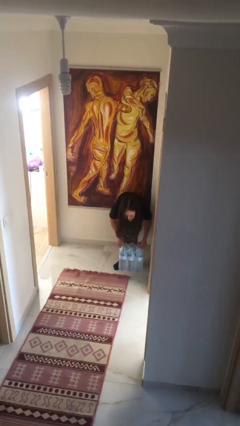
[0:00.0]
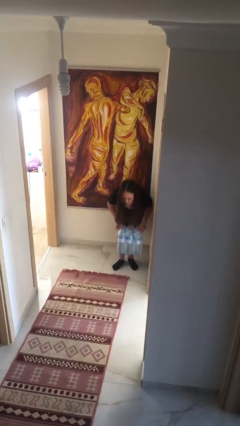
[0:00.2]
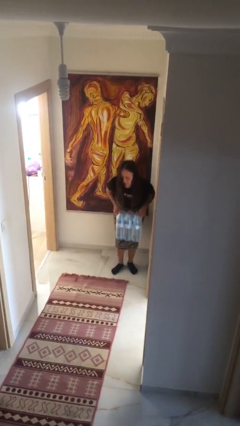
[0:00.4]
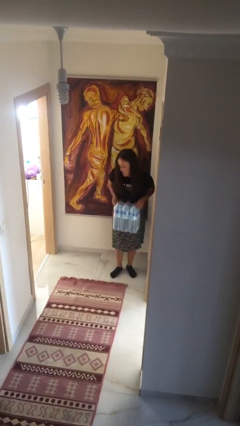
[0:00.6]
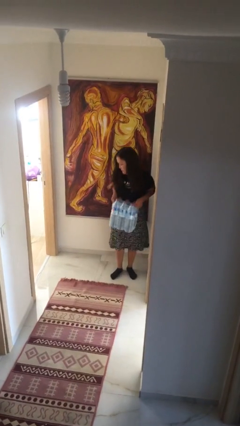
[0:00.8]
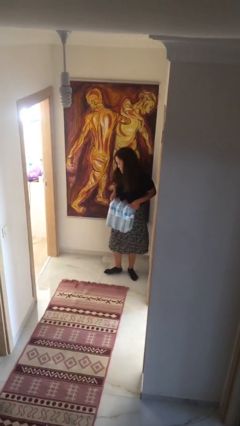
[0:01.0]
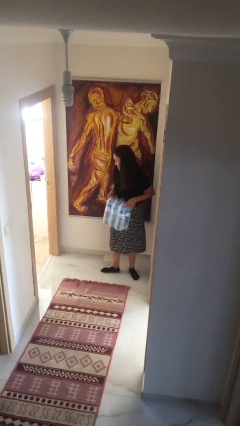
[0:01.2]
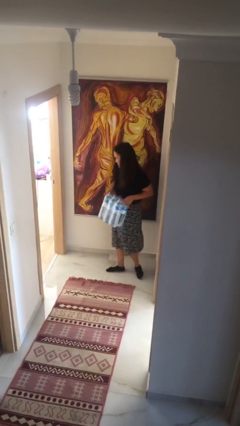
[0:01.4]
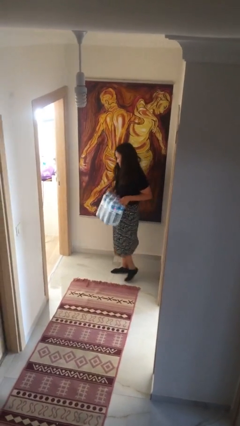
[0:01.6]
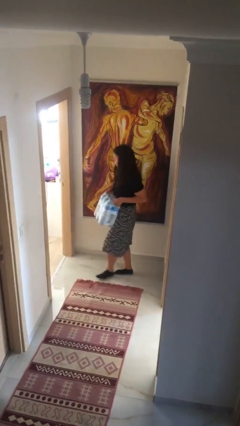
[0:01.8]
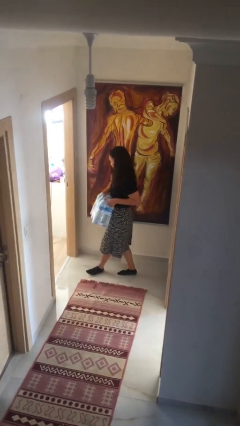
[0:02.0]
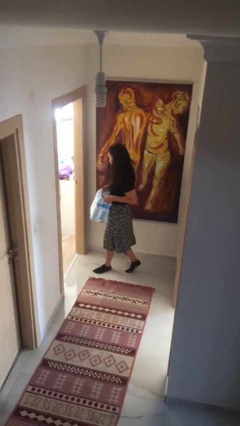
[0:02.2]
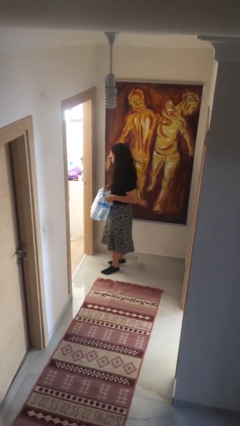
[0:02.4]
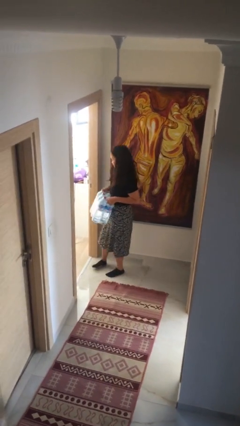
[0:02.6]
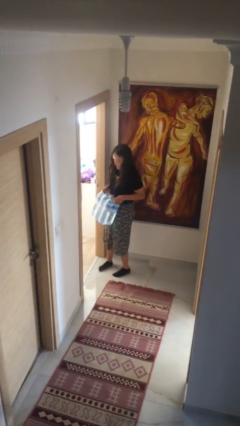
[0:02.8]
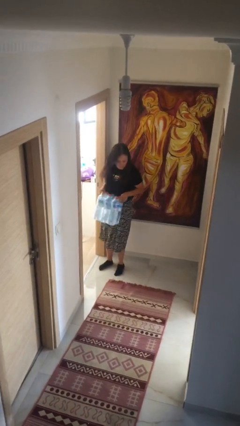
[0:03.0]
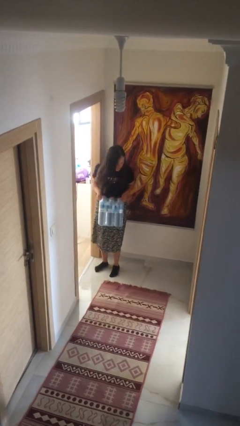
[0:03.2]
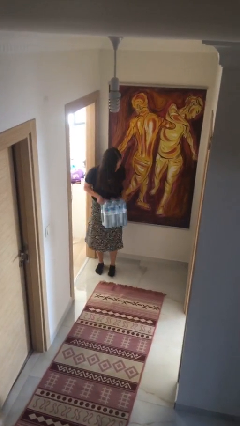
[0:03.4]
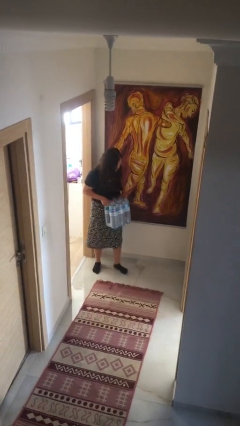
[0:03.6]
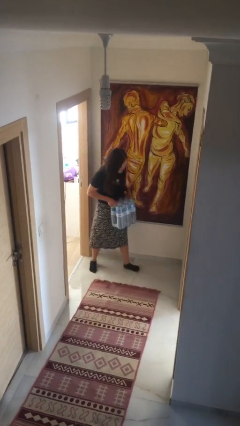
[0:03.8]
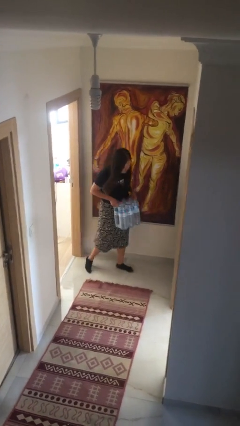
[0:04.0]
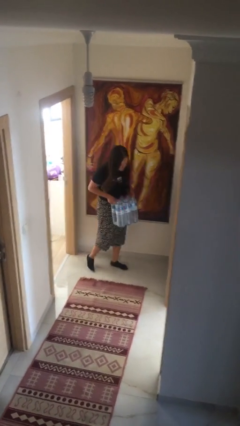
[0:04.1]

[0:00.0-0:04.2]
person carries heavy object

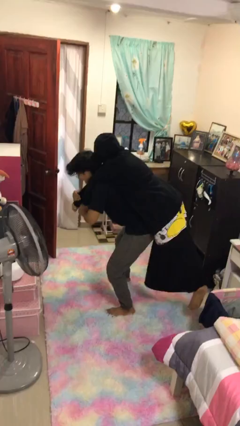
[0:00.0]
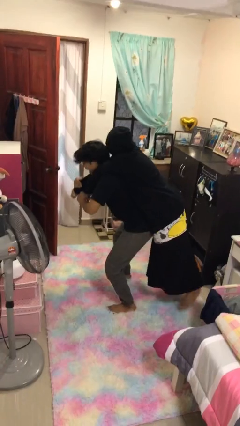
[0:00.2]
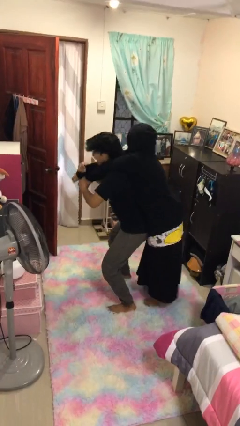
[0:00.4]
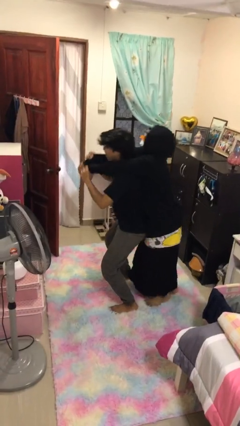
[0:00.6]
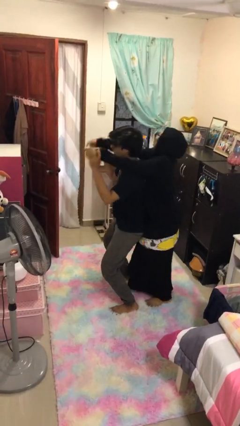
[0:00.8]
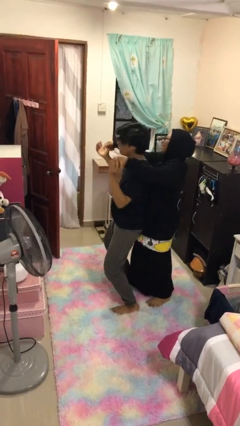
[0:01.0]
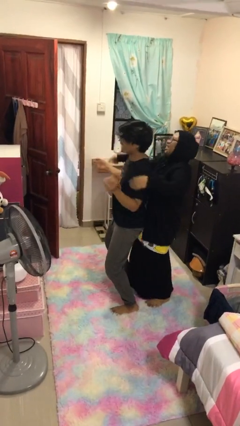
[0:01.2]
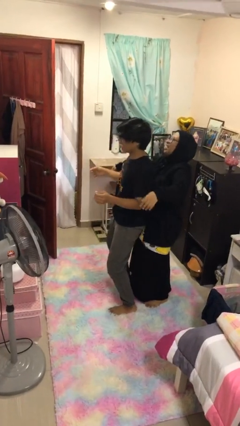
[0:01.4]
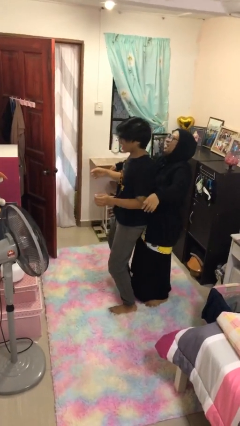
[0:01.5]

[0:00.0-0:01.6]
person puts down person

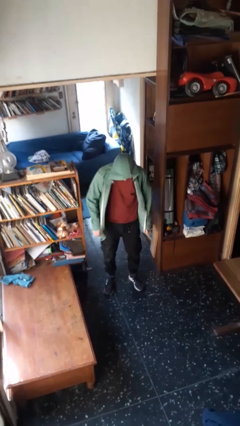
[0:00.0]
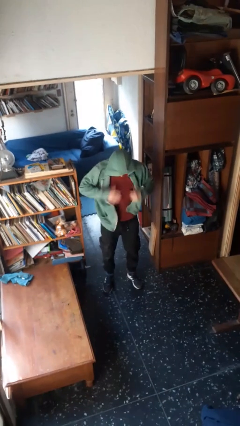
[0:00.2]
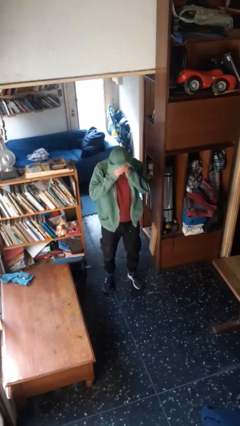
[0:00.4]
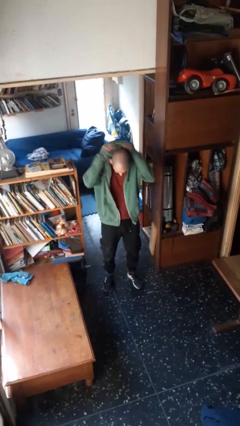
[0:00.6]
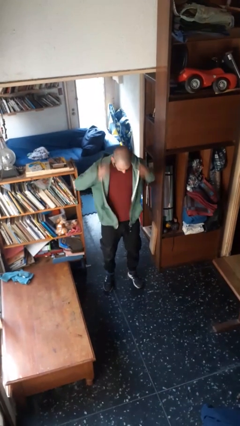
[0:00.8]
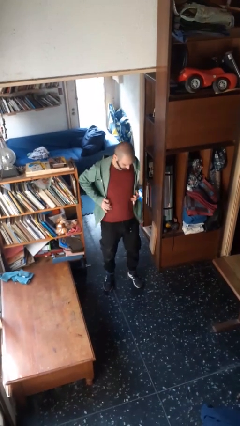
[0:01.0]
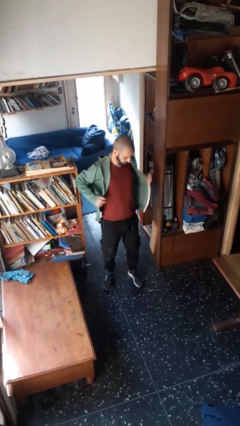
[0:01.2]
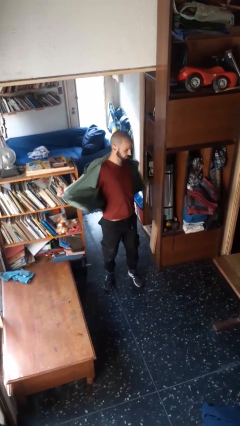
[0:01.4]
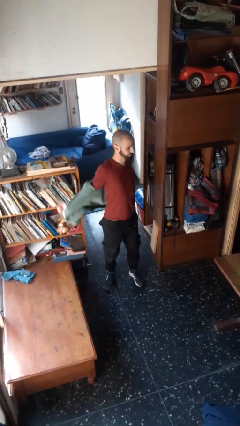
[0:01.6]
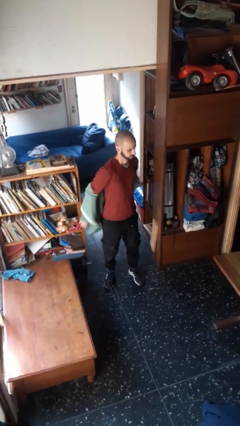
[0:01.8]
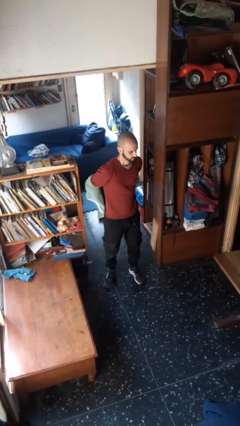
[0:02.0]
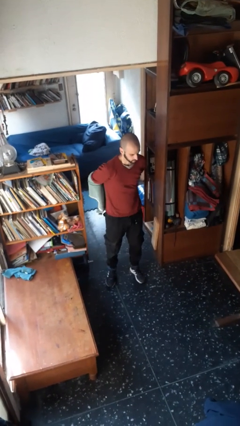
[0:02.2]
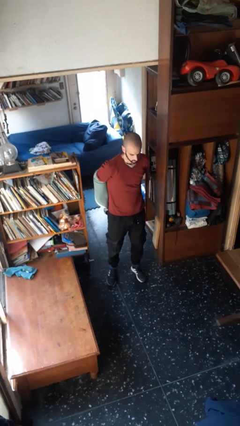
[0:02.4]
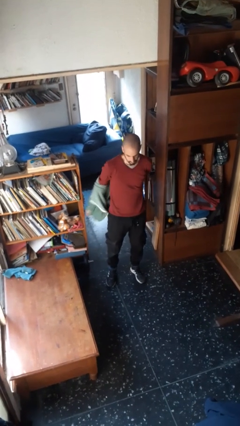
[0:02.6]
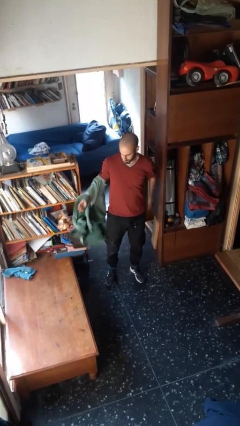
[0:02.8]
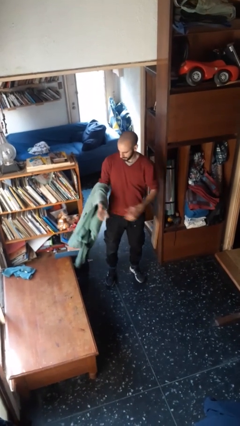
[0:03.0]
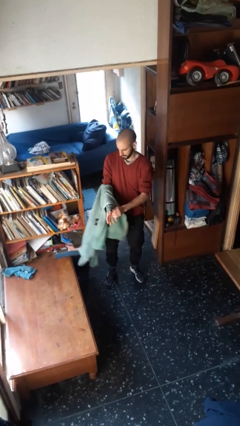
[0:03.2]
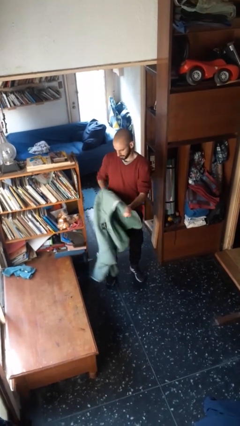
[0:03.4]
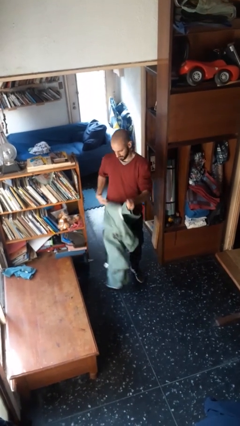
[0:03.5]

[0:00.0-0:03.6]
person takes off hoodie

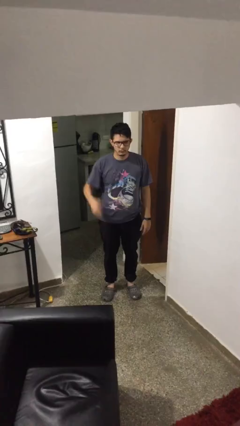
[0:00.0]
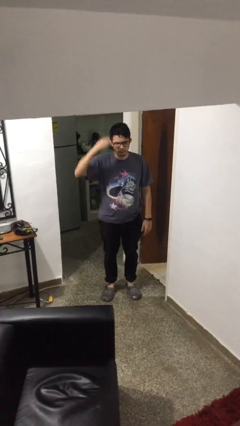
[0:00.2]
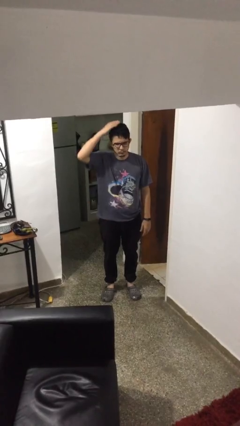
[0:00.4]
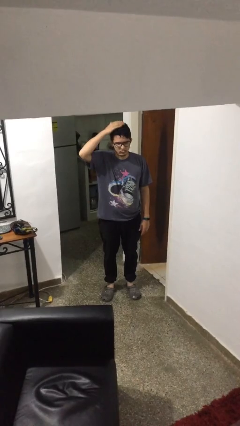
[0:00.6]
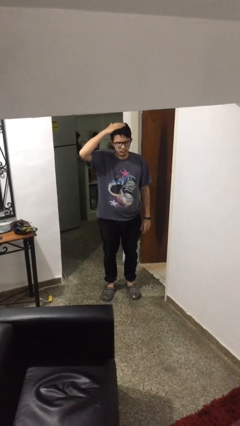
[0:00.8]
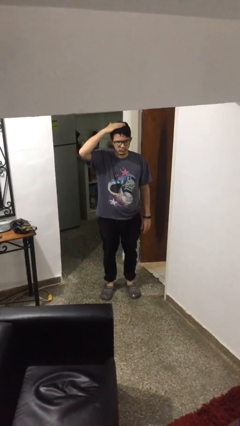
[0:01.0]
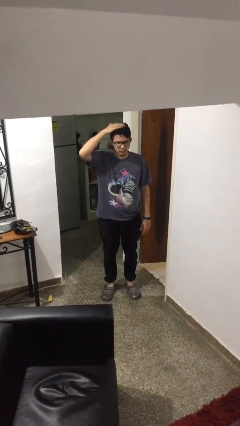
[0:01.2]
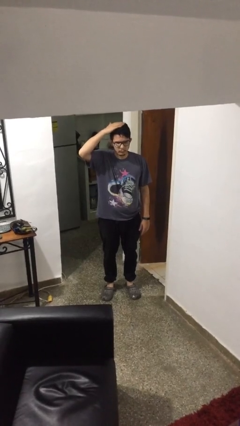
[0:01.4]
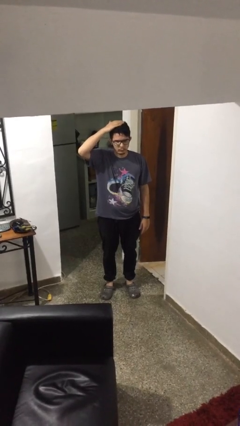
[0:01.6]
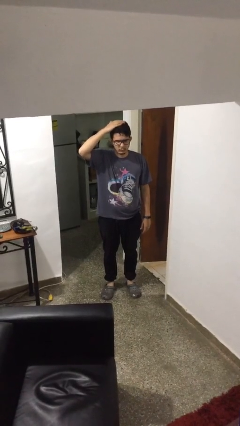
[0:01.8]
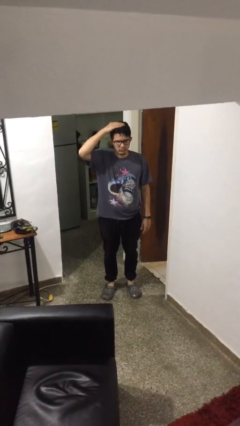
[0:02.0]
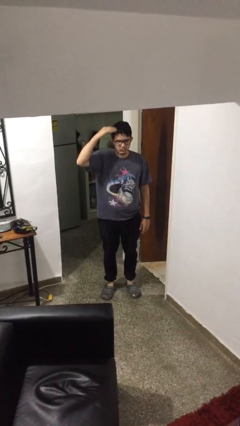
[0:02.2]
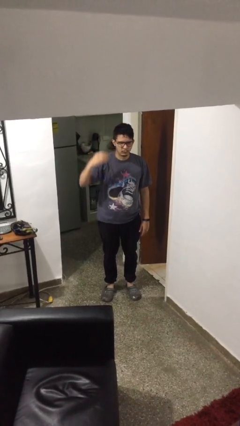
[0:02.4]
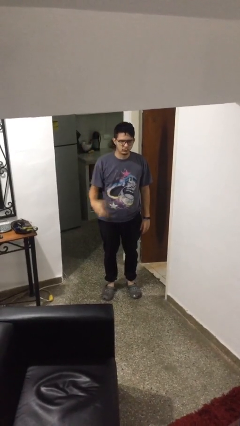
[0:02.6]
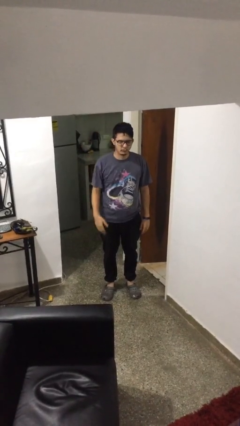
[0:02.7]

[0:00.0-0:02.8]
person pats head

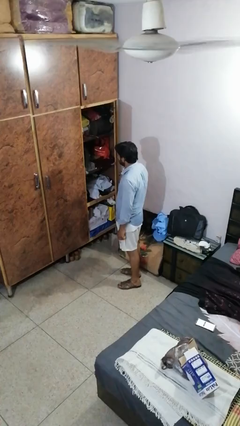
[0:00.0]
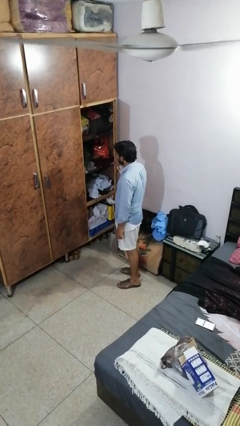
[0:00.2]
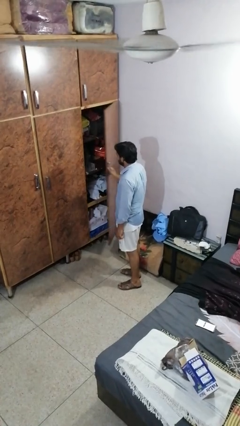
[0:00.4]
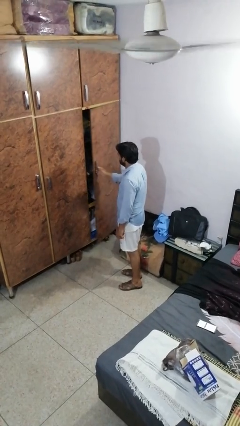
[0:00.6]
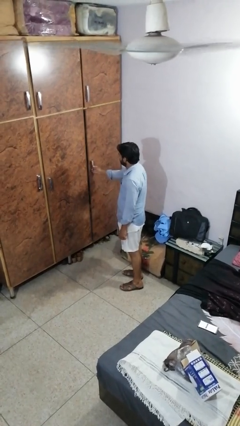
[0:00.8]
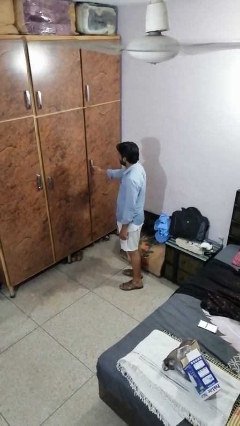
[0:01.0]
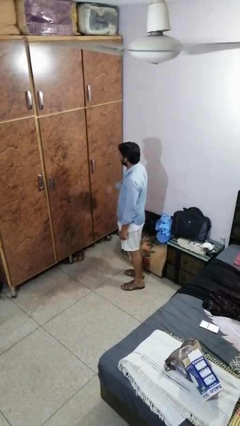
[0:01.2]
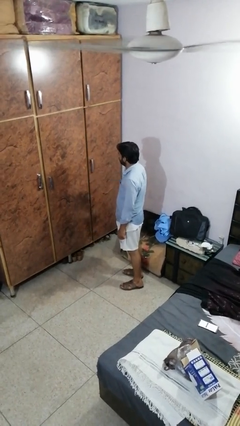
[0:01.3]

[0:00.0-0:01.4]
person closes closet door

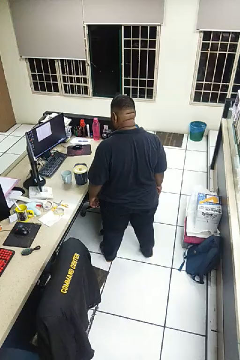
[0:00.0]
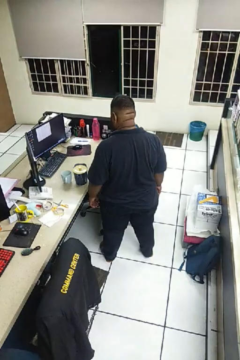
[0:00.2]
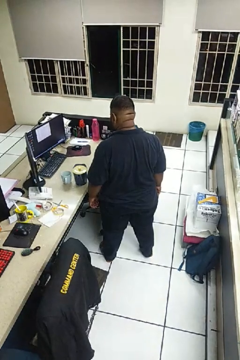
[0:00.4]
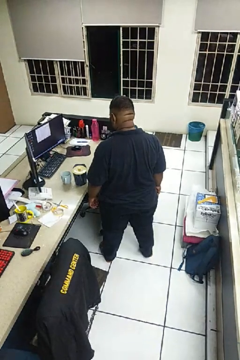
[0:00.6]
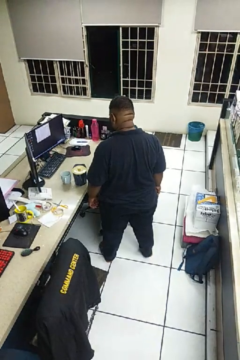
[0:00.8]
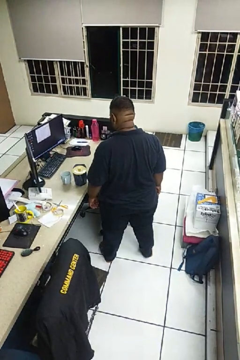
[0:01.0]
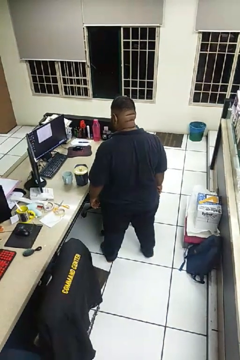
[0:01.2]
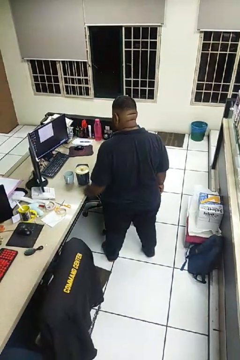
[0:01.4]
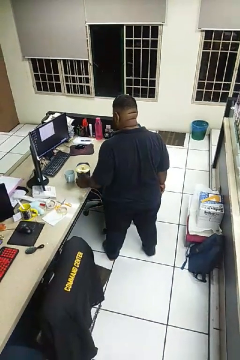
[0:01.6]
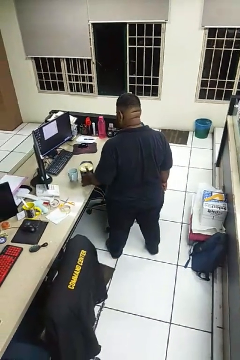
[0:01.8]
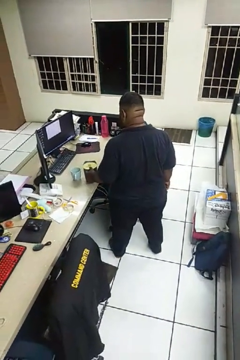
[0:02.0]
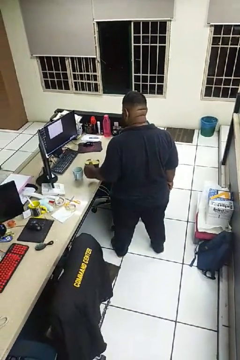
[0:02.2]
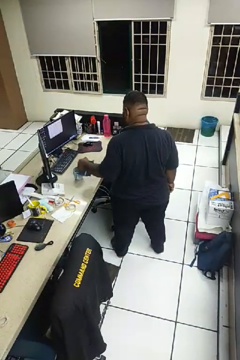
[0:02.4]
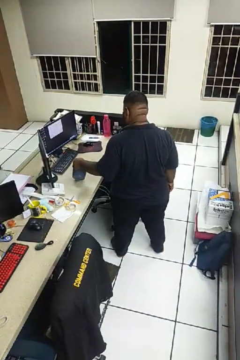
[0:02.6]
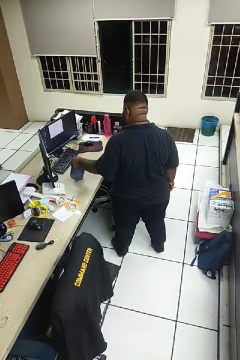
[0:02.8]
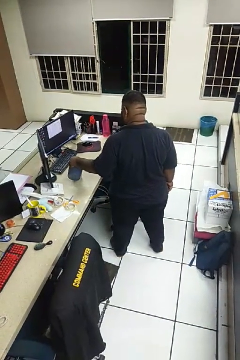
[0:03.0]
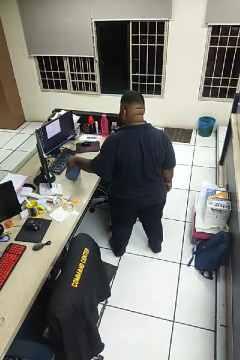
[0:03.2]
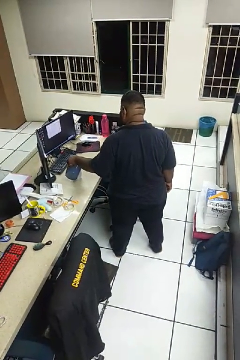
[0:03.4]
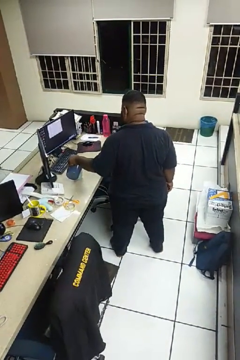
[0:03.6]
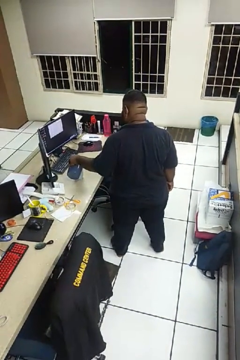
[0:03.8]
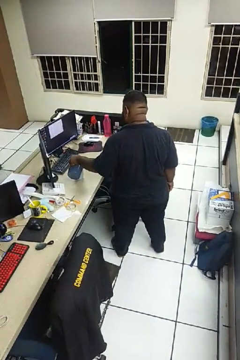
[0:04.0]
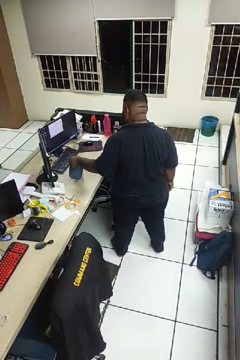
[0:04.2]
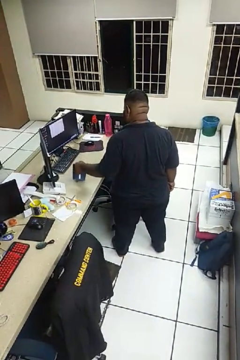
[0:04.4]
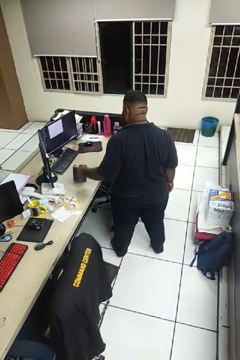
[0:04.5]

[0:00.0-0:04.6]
person pours coffee into mug
